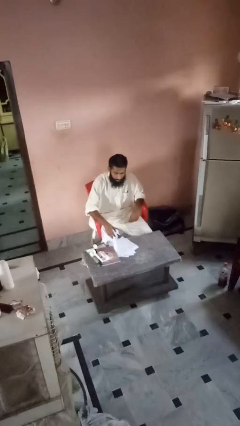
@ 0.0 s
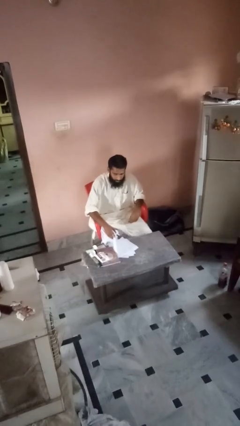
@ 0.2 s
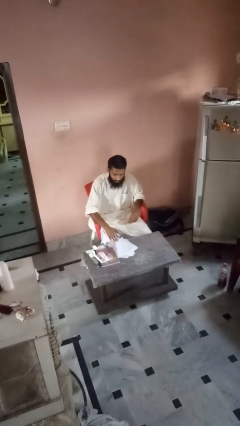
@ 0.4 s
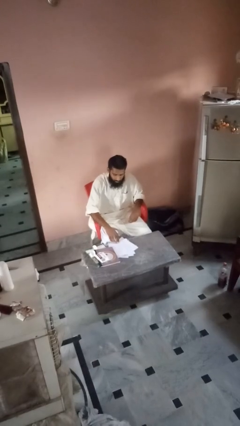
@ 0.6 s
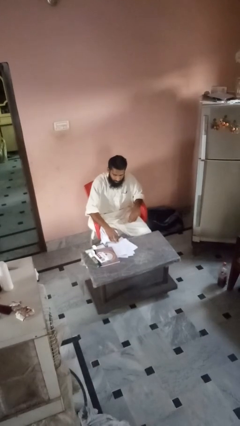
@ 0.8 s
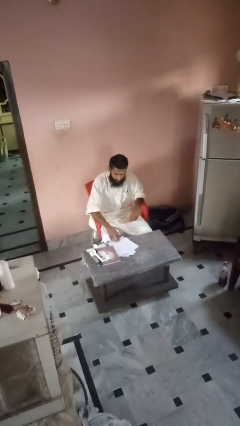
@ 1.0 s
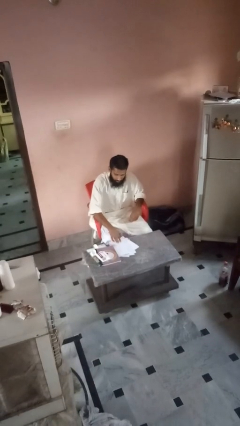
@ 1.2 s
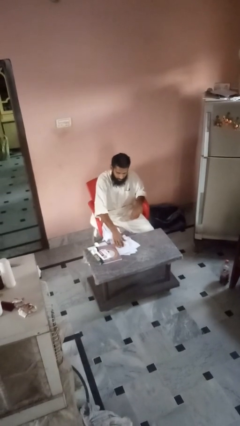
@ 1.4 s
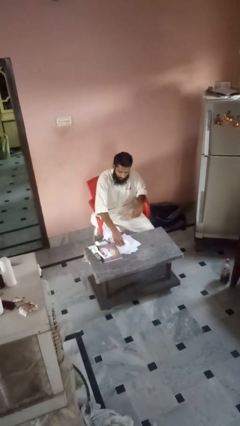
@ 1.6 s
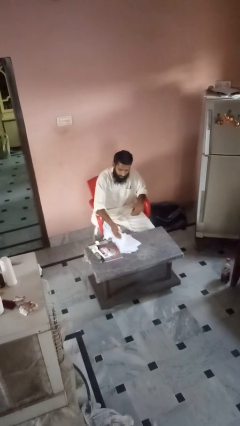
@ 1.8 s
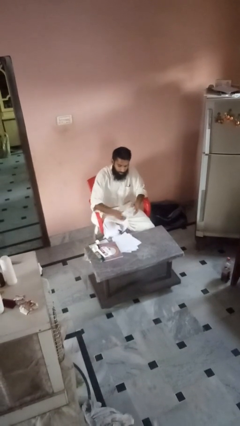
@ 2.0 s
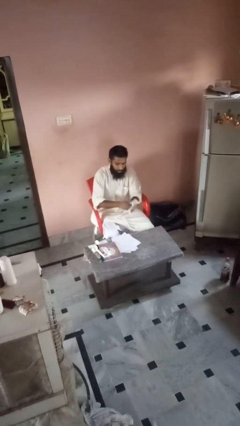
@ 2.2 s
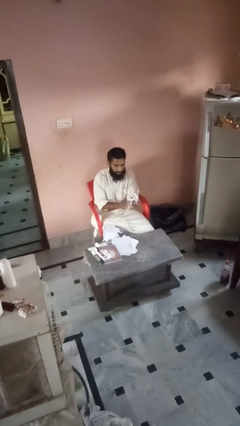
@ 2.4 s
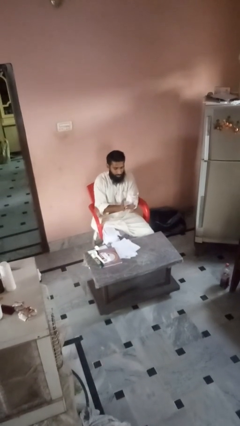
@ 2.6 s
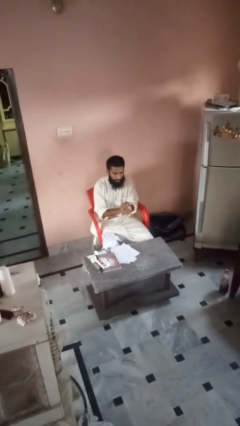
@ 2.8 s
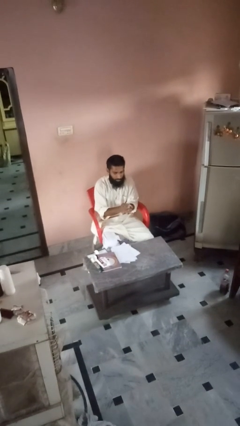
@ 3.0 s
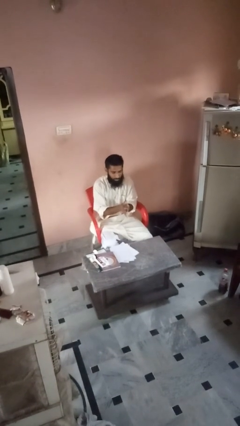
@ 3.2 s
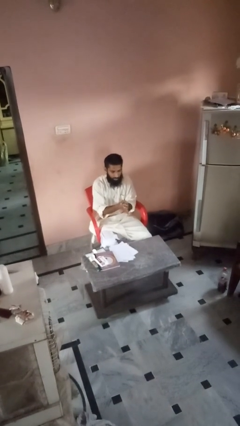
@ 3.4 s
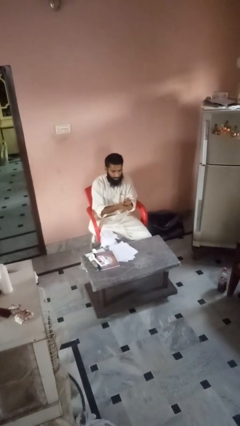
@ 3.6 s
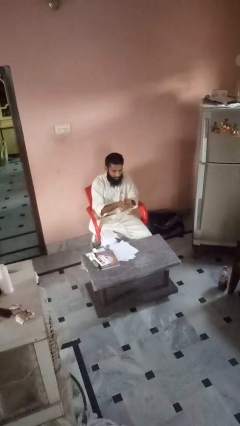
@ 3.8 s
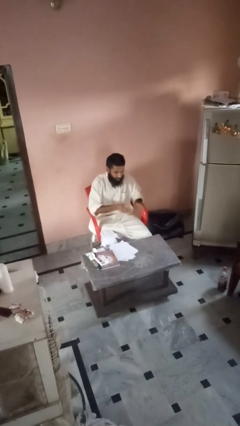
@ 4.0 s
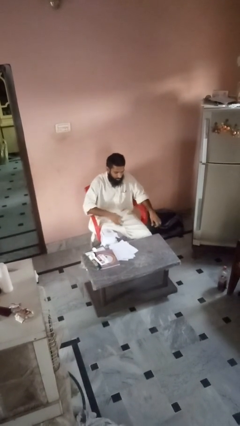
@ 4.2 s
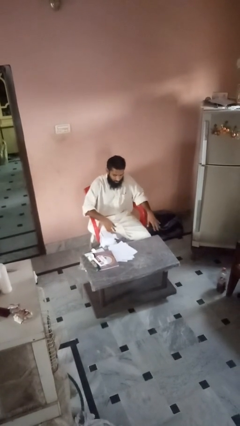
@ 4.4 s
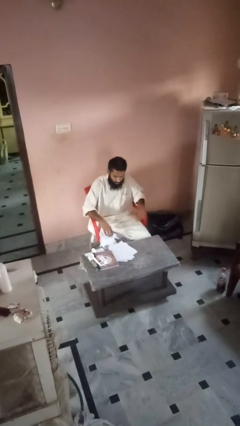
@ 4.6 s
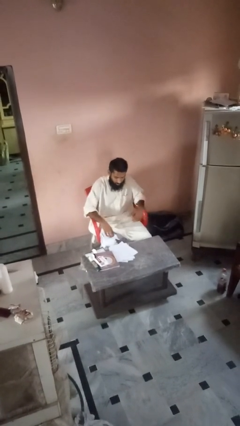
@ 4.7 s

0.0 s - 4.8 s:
person crumples paper

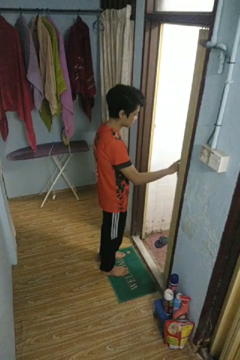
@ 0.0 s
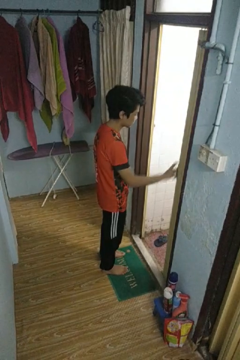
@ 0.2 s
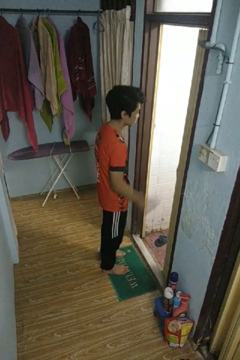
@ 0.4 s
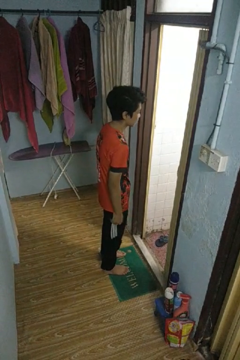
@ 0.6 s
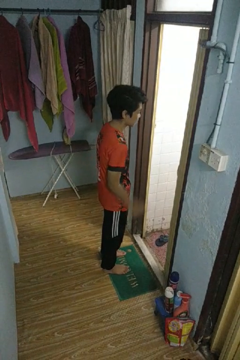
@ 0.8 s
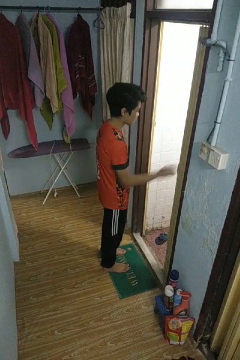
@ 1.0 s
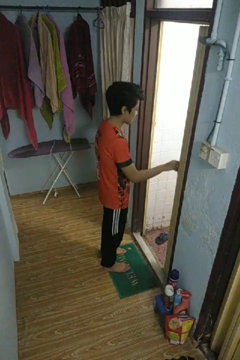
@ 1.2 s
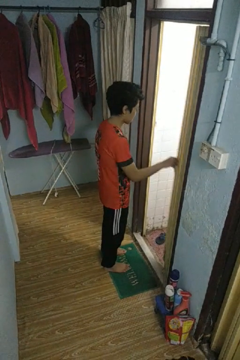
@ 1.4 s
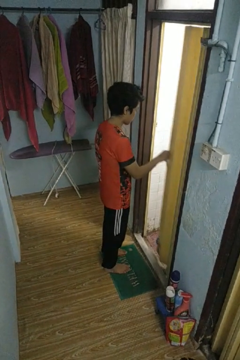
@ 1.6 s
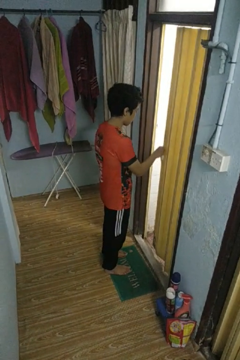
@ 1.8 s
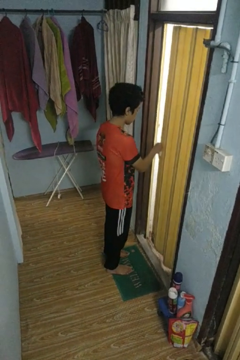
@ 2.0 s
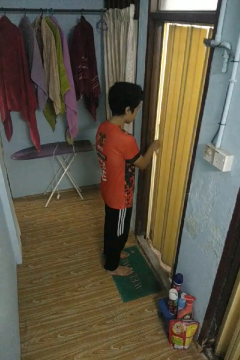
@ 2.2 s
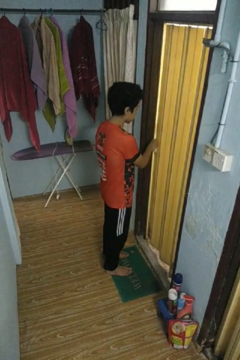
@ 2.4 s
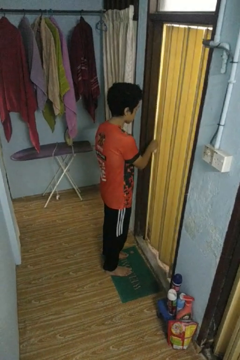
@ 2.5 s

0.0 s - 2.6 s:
person closes sliding door

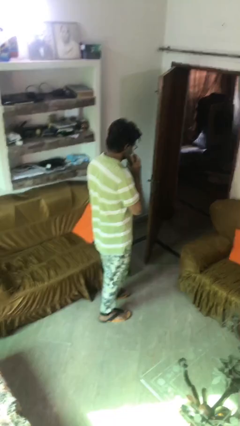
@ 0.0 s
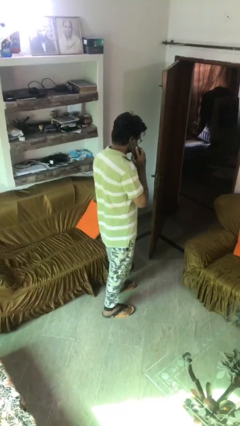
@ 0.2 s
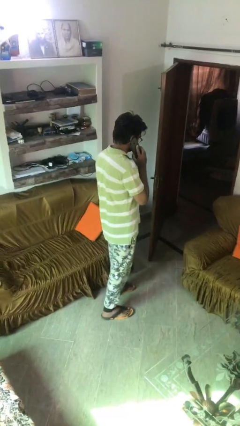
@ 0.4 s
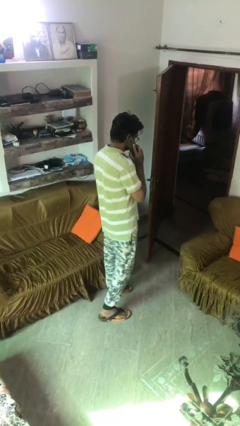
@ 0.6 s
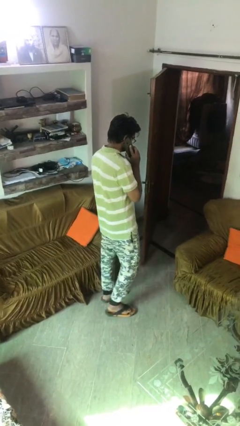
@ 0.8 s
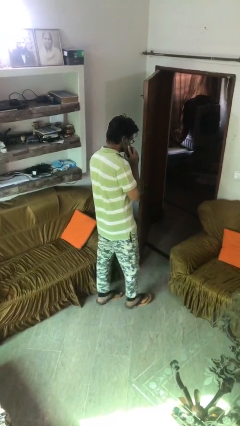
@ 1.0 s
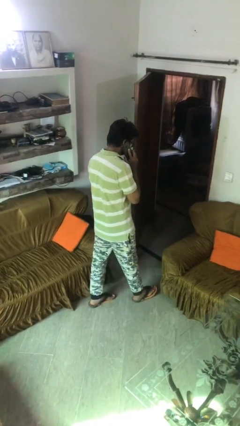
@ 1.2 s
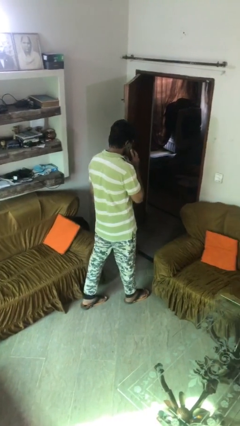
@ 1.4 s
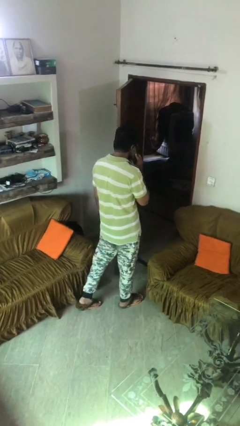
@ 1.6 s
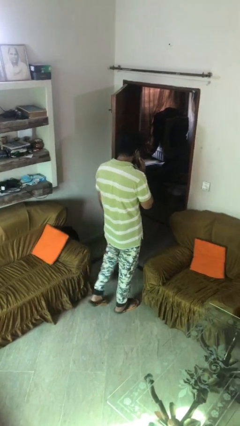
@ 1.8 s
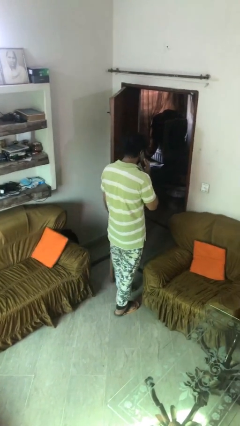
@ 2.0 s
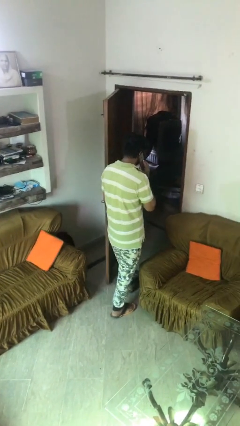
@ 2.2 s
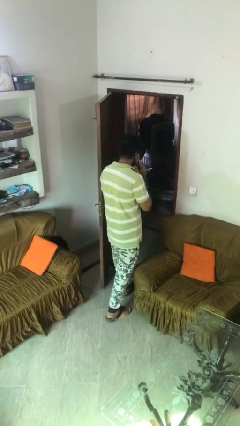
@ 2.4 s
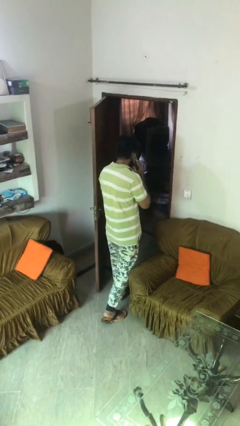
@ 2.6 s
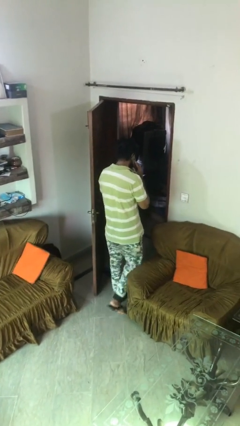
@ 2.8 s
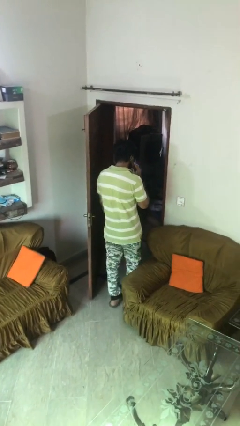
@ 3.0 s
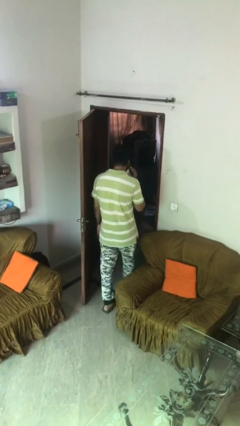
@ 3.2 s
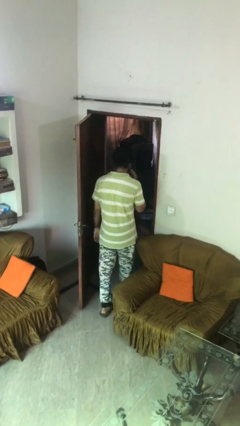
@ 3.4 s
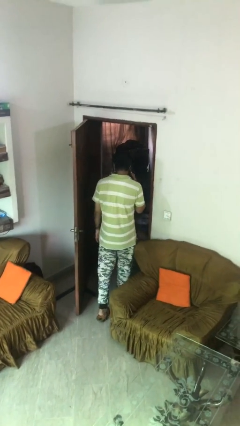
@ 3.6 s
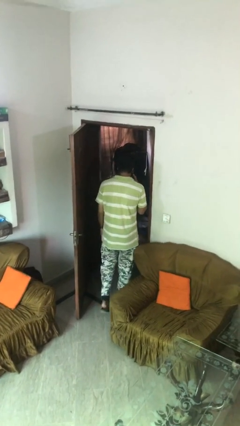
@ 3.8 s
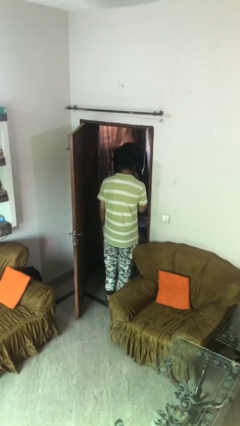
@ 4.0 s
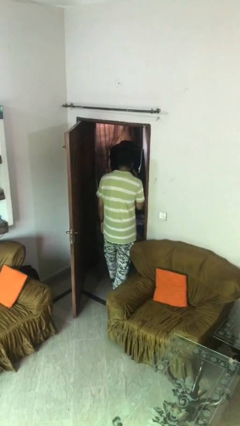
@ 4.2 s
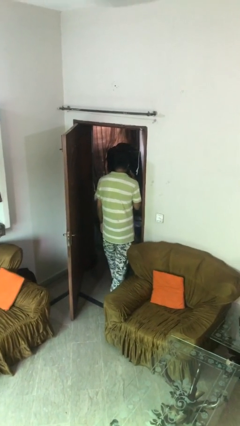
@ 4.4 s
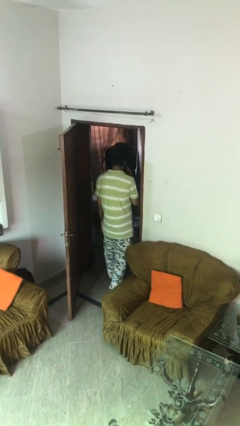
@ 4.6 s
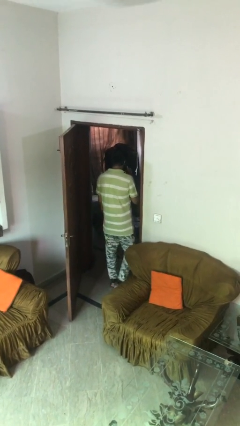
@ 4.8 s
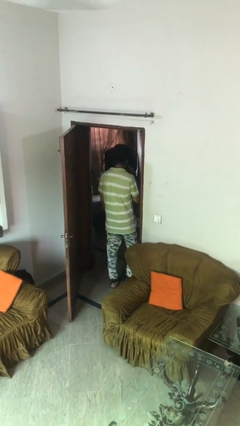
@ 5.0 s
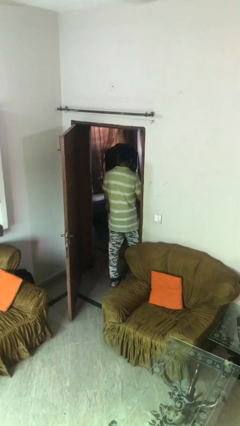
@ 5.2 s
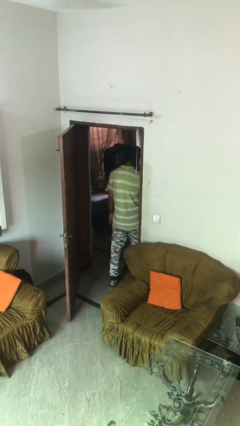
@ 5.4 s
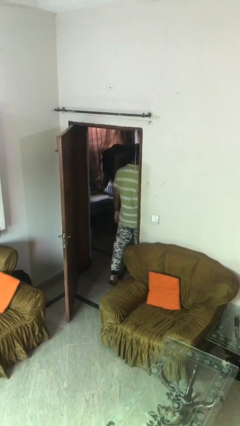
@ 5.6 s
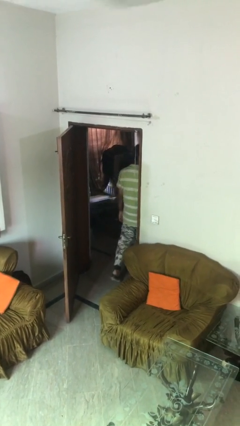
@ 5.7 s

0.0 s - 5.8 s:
person exits scene through structure

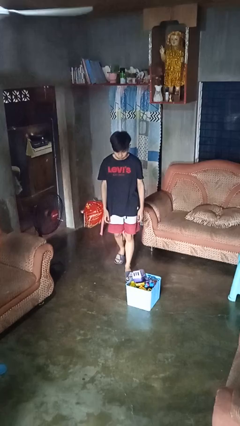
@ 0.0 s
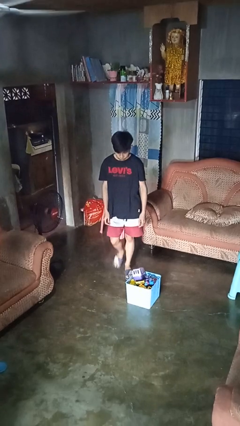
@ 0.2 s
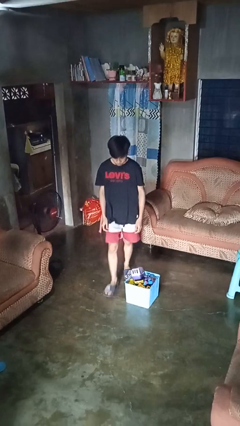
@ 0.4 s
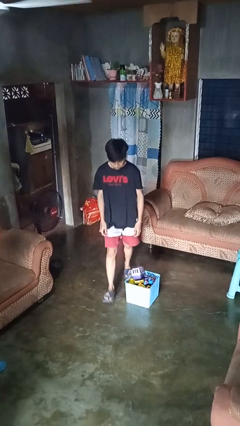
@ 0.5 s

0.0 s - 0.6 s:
person trips on object on floor

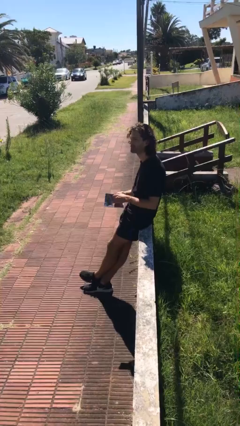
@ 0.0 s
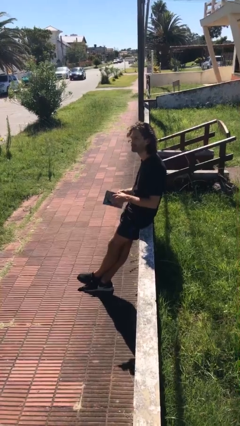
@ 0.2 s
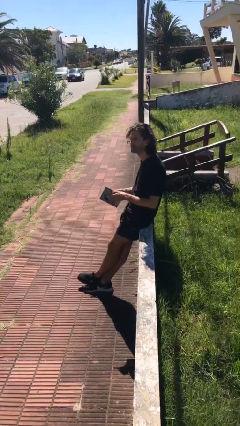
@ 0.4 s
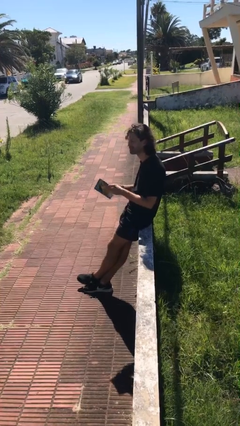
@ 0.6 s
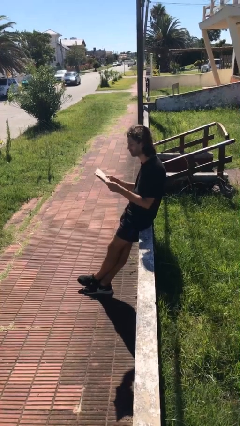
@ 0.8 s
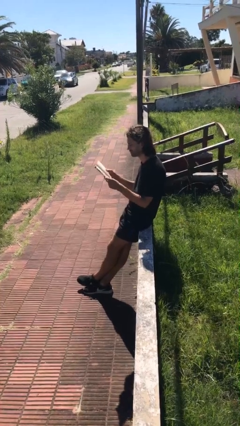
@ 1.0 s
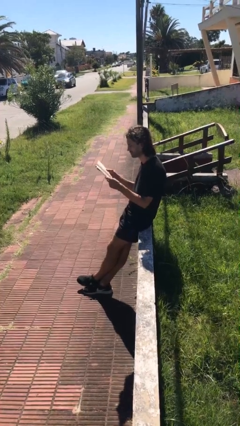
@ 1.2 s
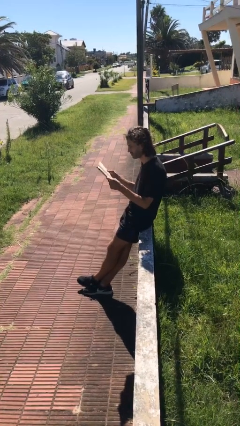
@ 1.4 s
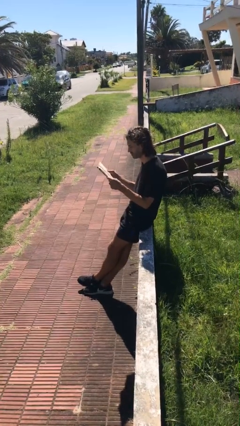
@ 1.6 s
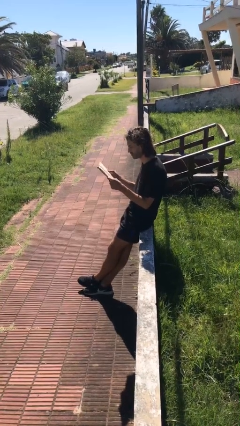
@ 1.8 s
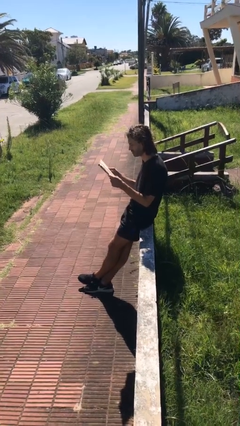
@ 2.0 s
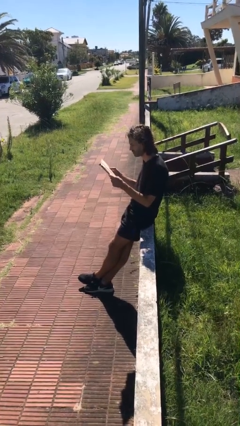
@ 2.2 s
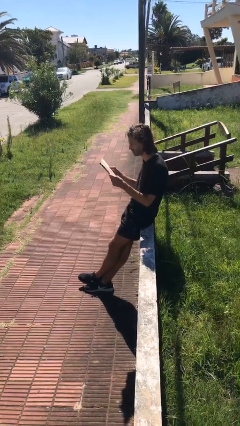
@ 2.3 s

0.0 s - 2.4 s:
person reads document

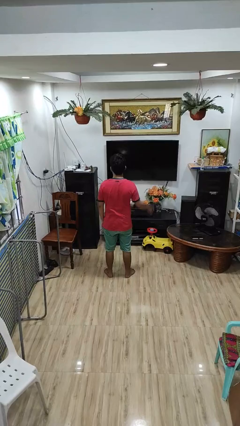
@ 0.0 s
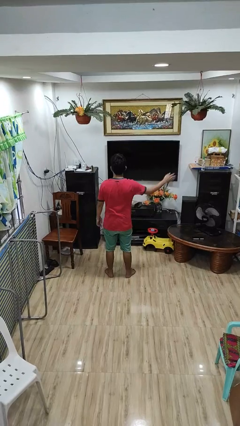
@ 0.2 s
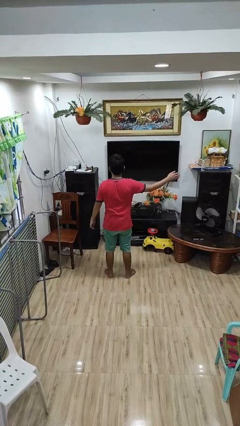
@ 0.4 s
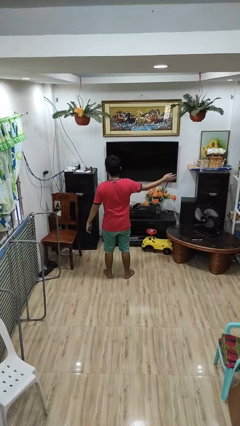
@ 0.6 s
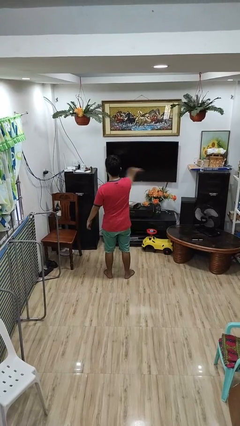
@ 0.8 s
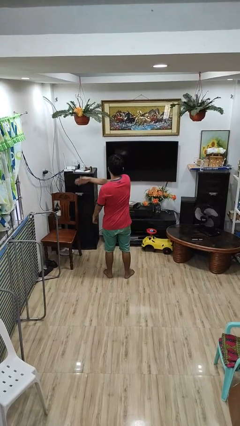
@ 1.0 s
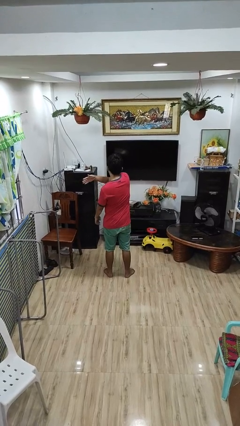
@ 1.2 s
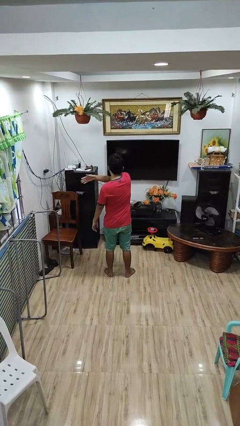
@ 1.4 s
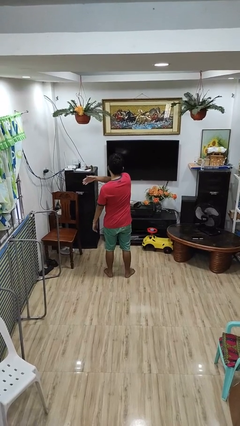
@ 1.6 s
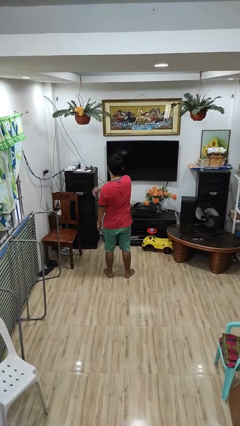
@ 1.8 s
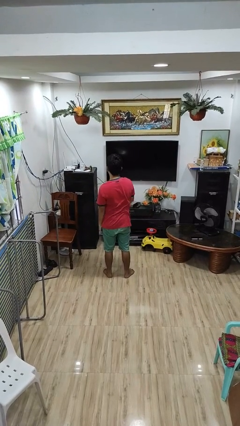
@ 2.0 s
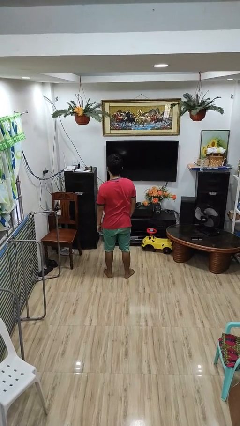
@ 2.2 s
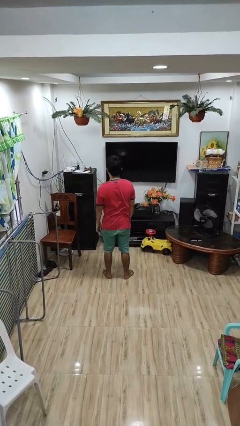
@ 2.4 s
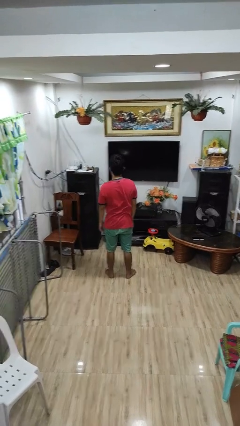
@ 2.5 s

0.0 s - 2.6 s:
person gestures swipe left
